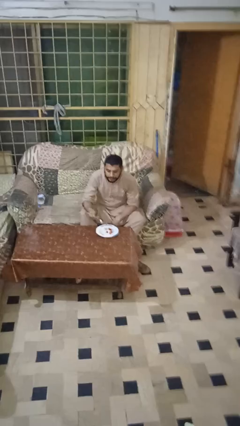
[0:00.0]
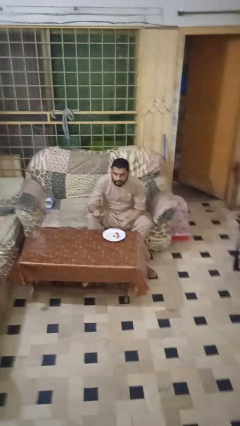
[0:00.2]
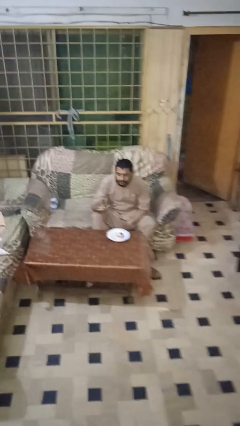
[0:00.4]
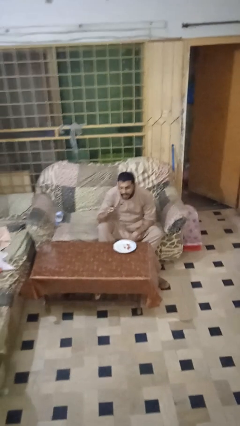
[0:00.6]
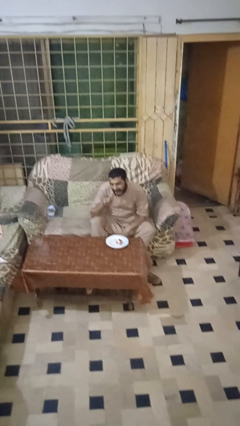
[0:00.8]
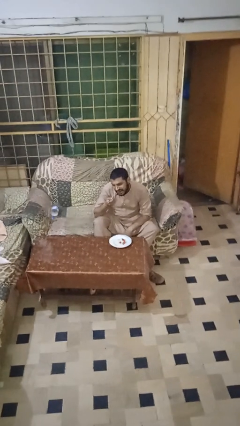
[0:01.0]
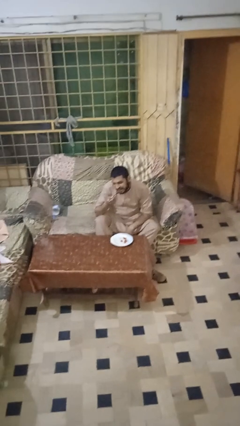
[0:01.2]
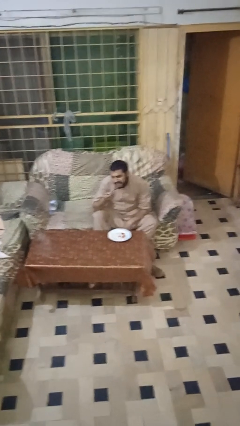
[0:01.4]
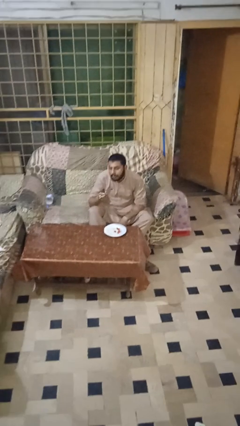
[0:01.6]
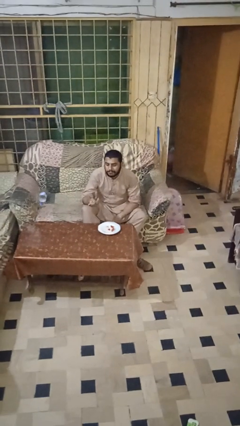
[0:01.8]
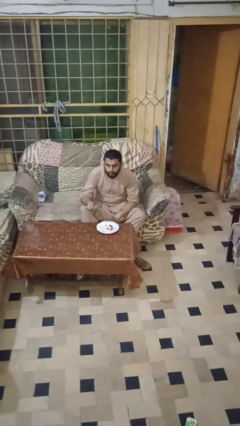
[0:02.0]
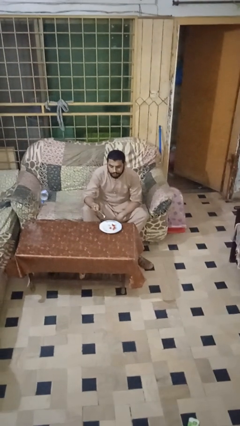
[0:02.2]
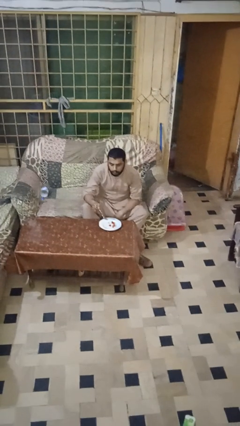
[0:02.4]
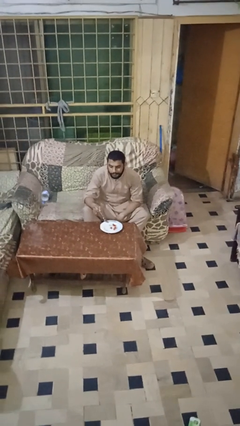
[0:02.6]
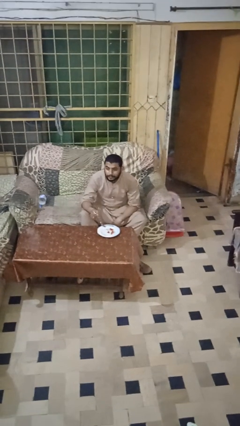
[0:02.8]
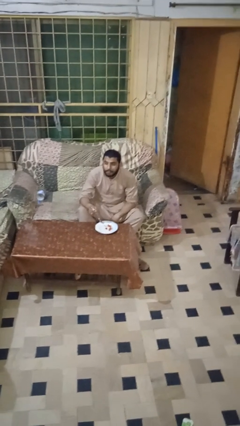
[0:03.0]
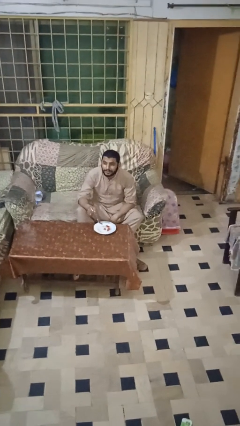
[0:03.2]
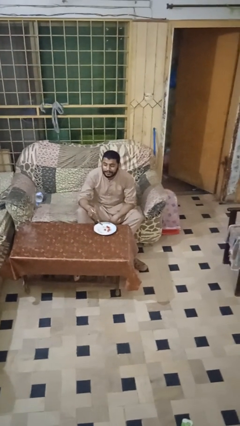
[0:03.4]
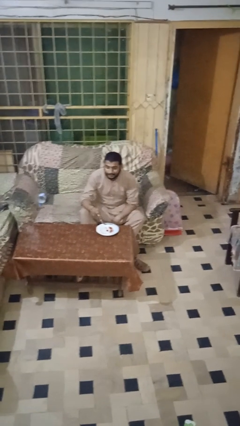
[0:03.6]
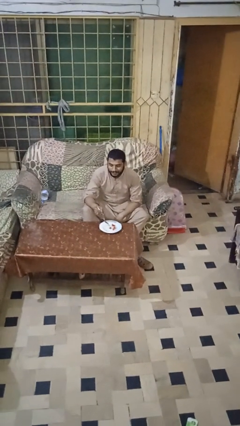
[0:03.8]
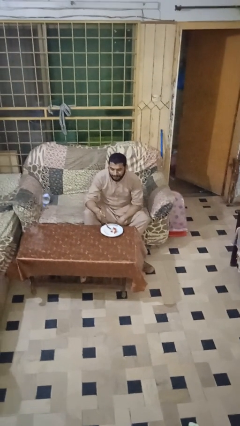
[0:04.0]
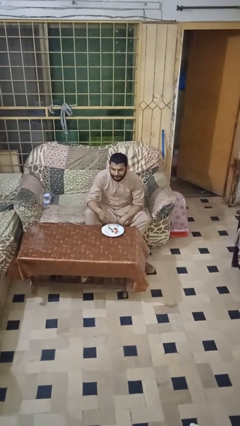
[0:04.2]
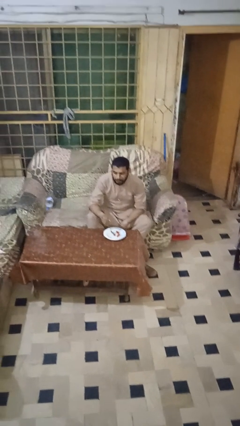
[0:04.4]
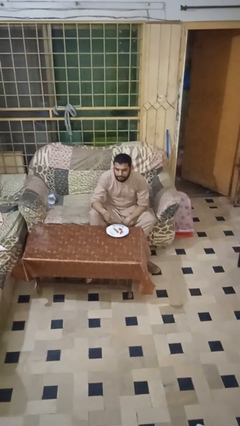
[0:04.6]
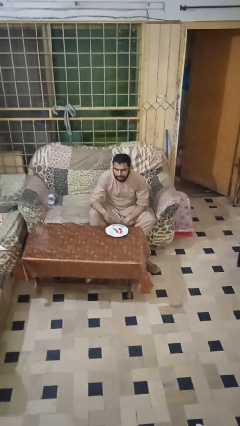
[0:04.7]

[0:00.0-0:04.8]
person eats with utensil

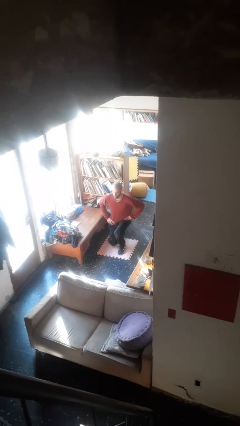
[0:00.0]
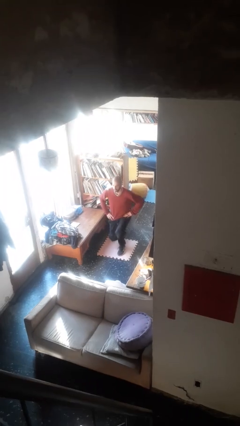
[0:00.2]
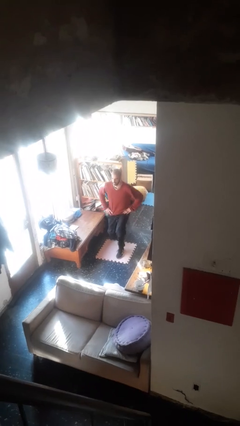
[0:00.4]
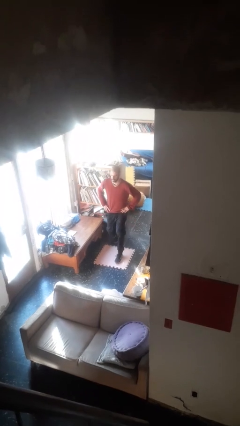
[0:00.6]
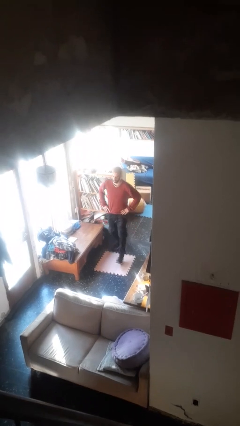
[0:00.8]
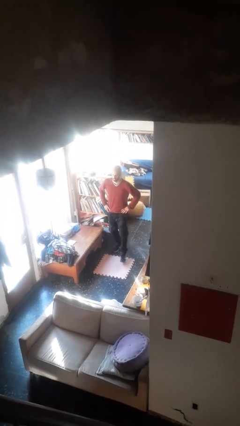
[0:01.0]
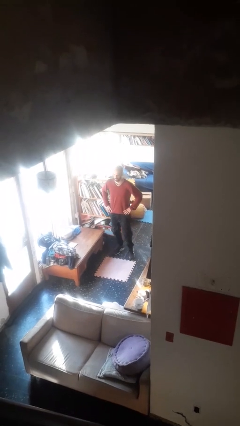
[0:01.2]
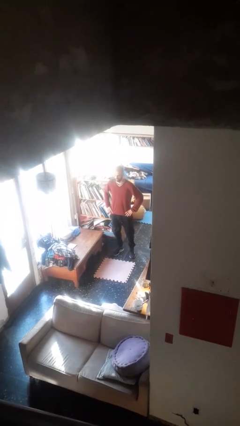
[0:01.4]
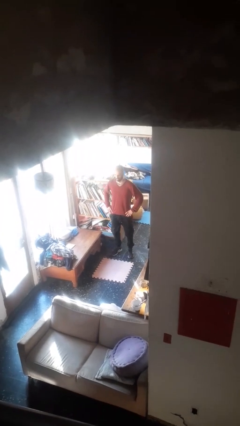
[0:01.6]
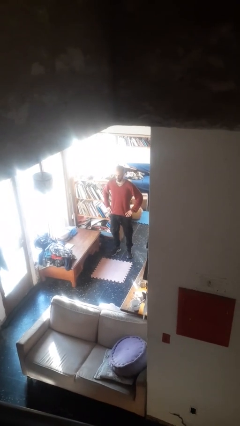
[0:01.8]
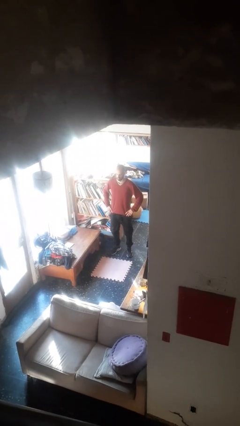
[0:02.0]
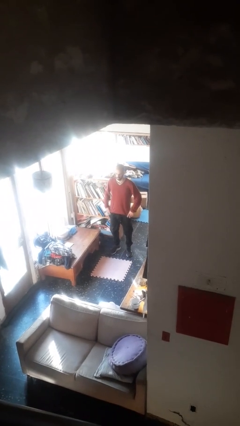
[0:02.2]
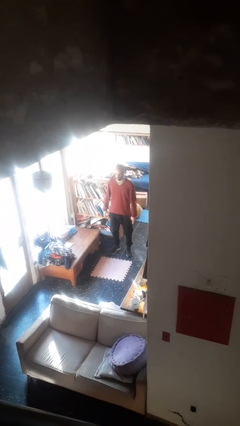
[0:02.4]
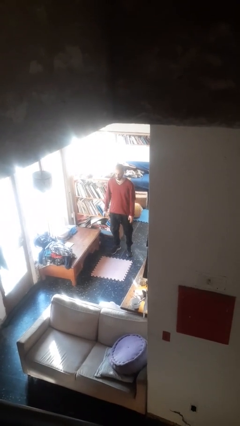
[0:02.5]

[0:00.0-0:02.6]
person stands up from floor

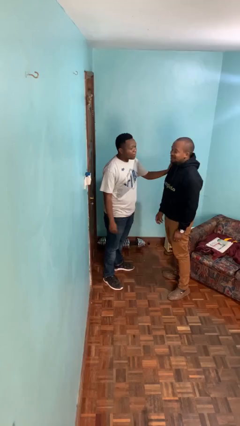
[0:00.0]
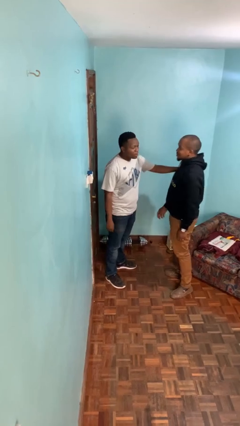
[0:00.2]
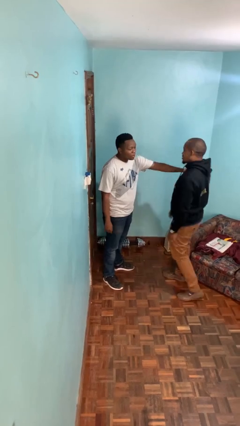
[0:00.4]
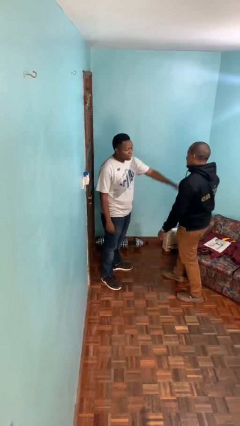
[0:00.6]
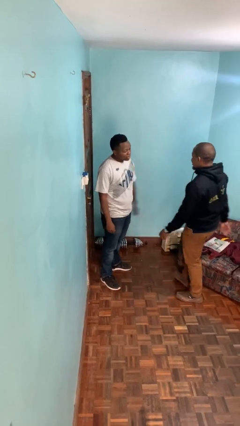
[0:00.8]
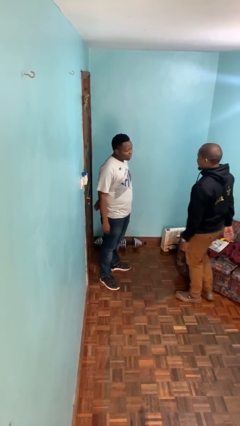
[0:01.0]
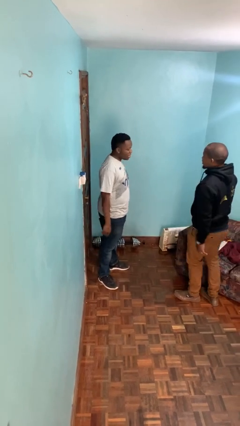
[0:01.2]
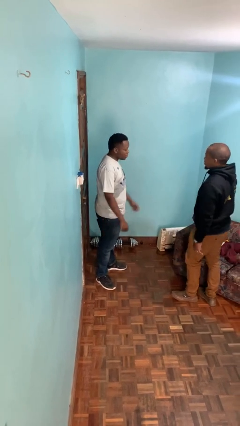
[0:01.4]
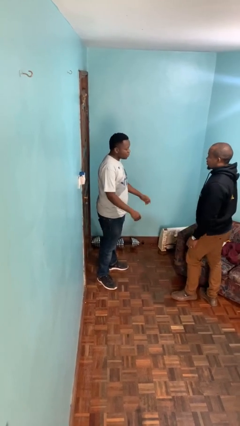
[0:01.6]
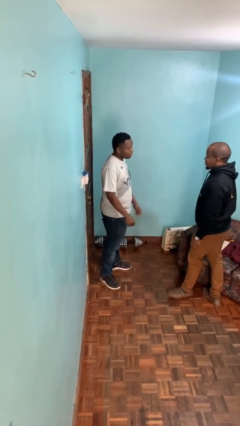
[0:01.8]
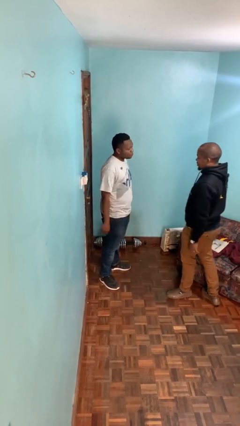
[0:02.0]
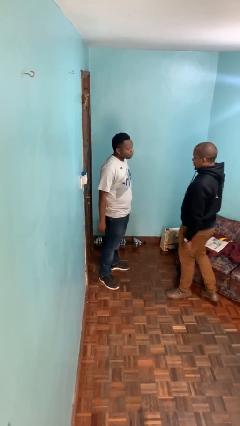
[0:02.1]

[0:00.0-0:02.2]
person shoves person

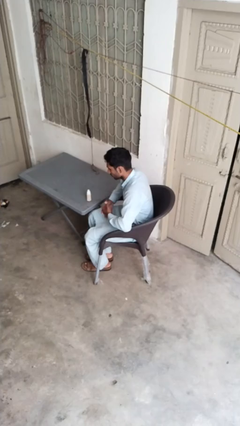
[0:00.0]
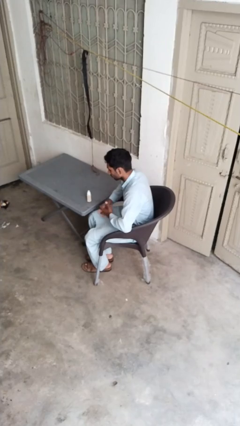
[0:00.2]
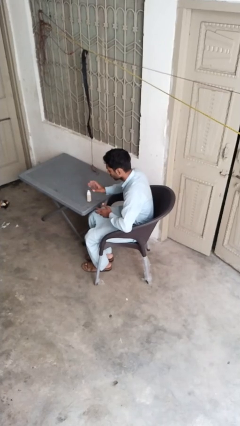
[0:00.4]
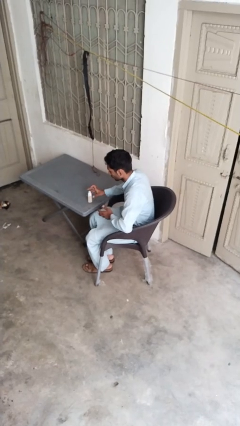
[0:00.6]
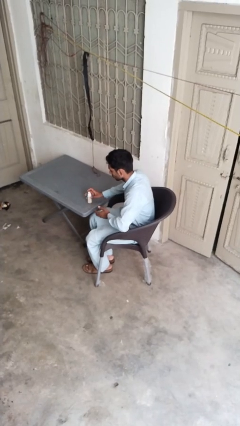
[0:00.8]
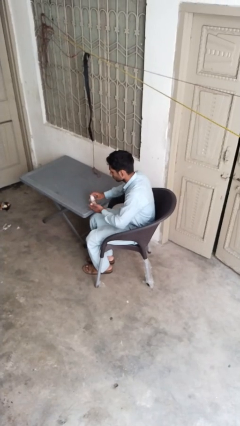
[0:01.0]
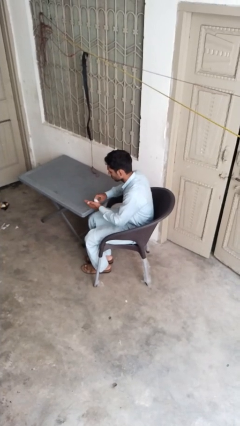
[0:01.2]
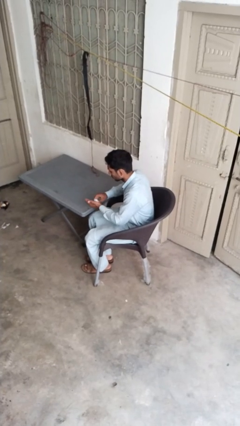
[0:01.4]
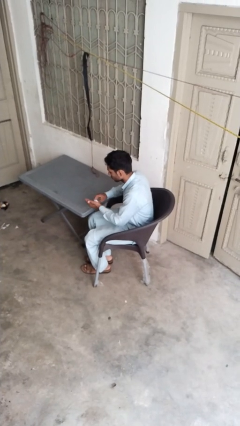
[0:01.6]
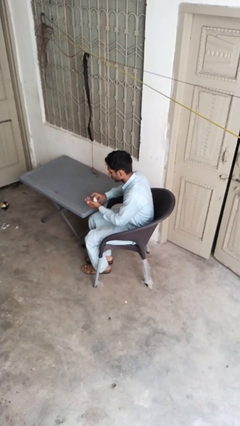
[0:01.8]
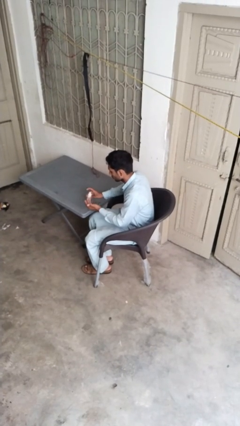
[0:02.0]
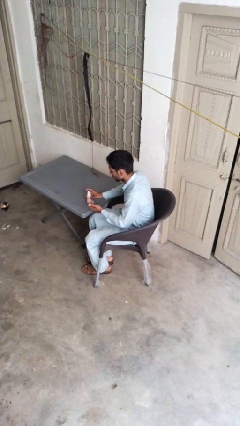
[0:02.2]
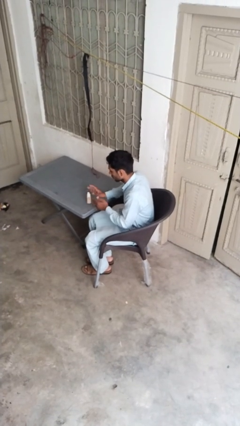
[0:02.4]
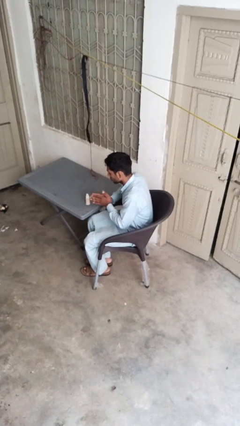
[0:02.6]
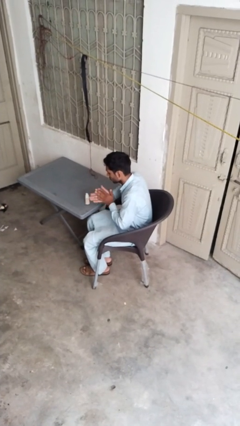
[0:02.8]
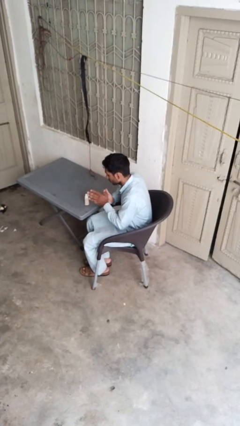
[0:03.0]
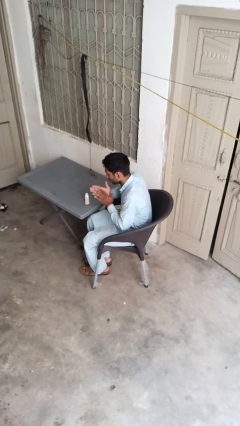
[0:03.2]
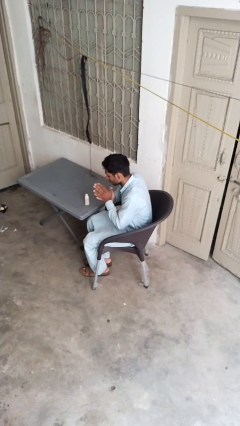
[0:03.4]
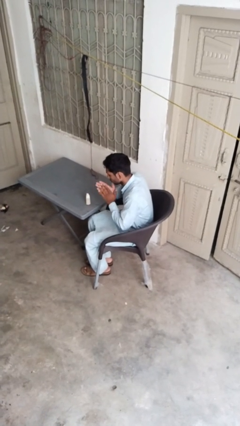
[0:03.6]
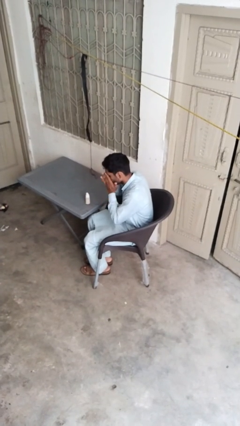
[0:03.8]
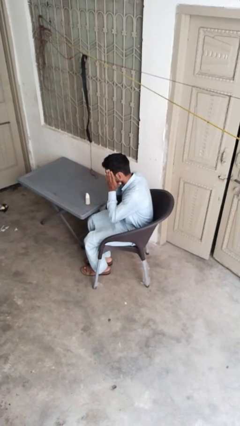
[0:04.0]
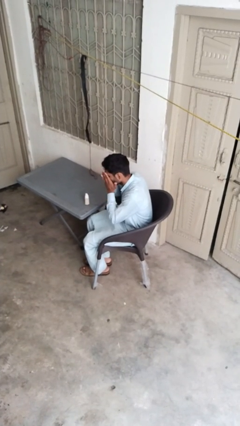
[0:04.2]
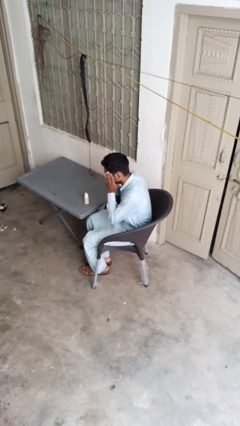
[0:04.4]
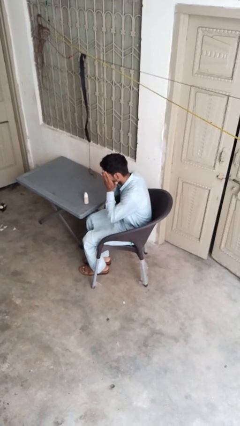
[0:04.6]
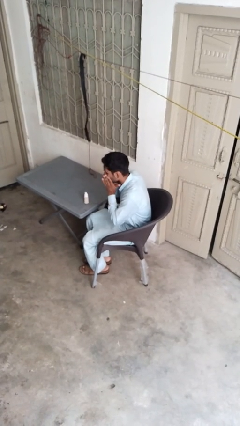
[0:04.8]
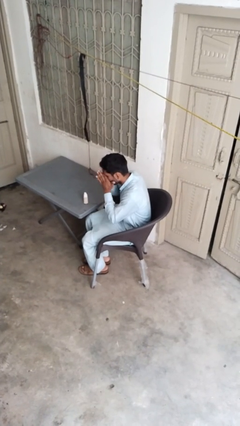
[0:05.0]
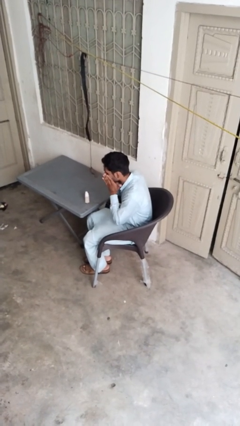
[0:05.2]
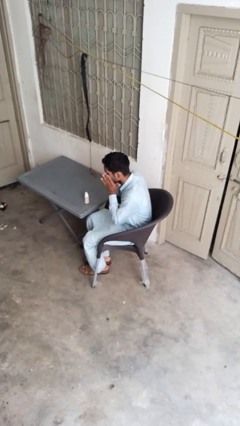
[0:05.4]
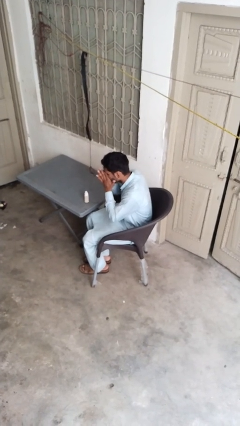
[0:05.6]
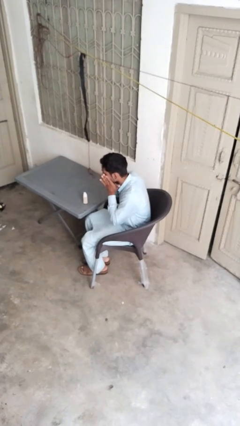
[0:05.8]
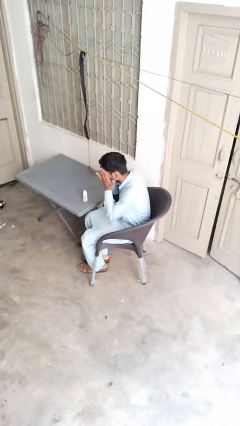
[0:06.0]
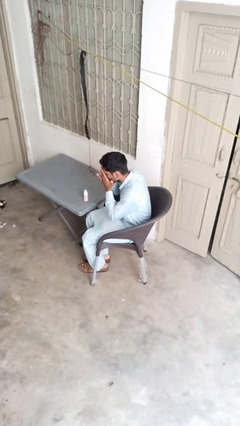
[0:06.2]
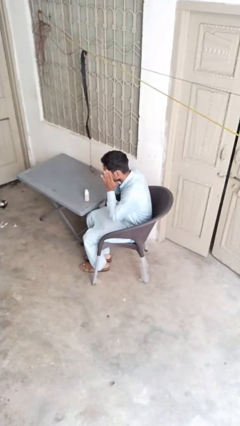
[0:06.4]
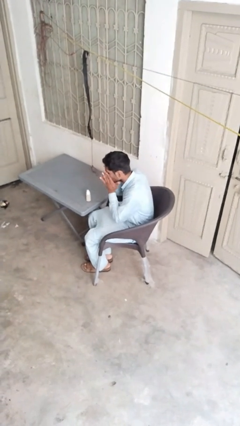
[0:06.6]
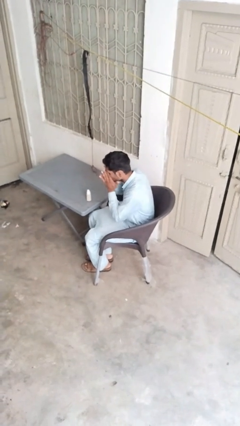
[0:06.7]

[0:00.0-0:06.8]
person applies facial moisturizer

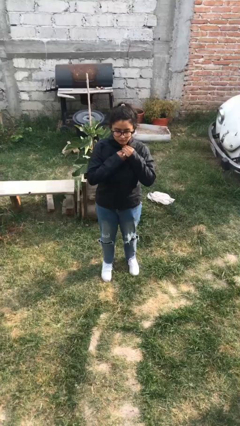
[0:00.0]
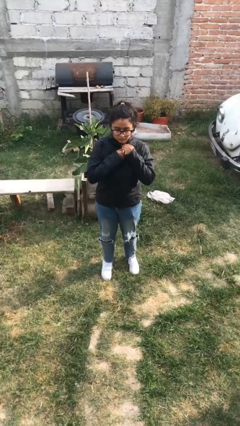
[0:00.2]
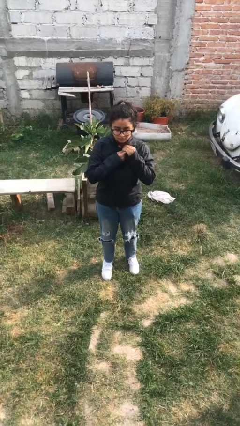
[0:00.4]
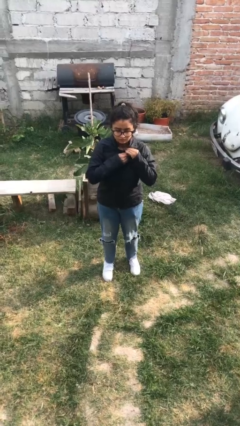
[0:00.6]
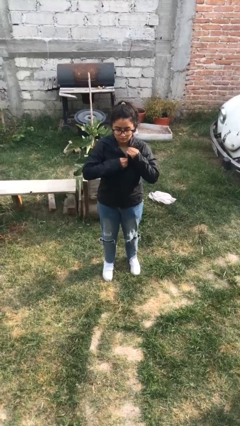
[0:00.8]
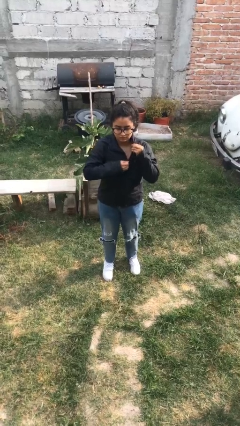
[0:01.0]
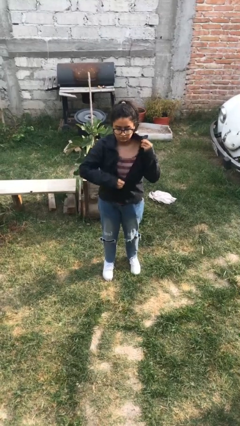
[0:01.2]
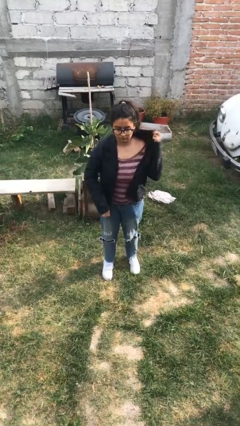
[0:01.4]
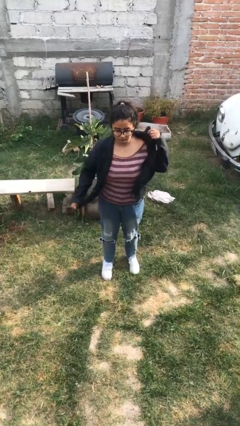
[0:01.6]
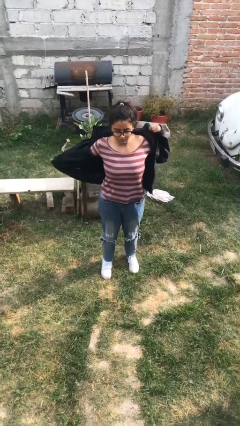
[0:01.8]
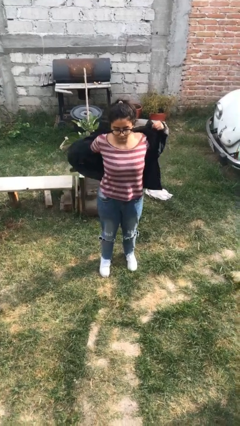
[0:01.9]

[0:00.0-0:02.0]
person unzips jacket
